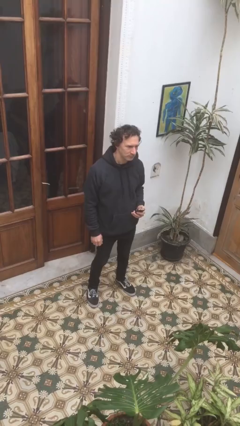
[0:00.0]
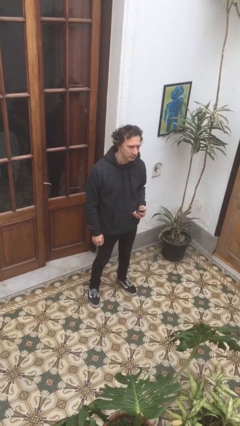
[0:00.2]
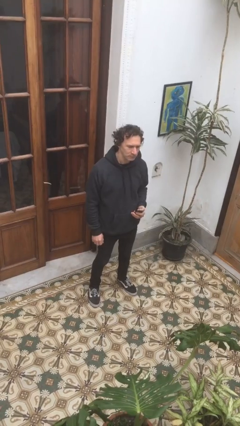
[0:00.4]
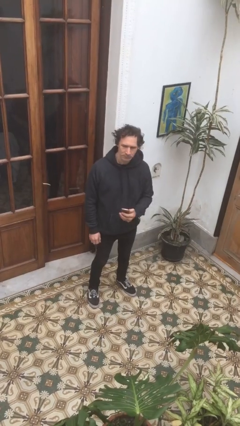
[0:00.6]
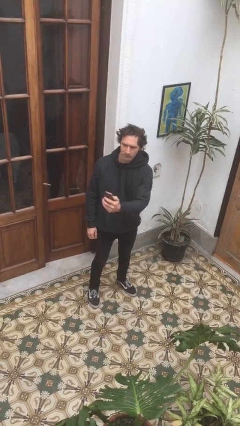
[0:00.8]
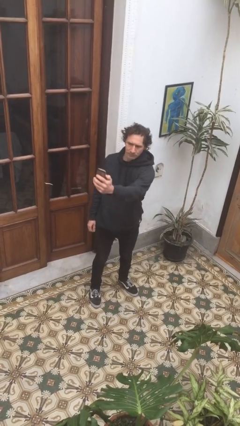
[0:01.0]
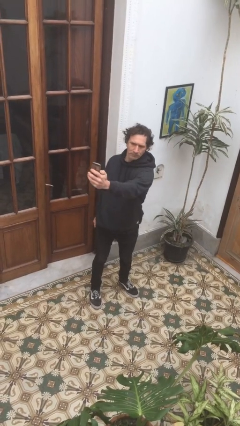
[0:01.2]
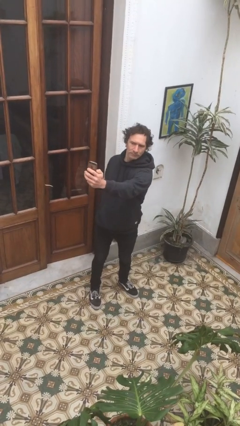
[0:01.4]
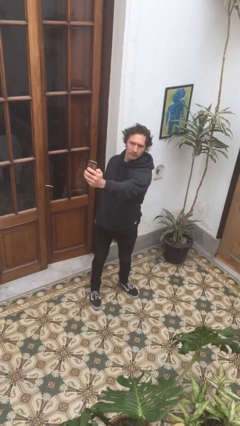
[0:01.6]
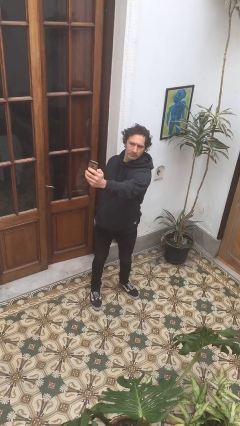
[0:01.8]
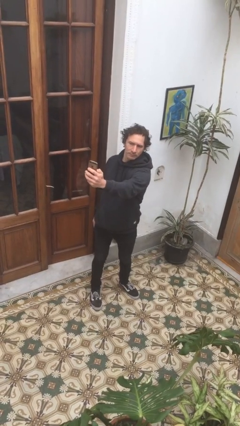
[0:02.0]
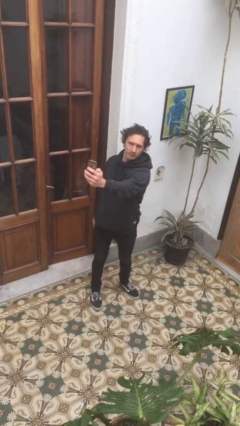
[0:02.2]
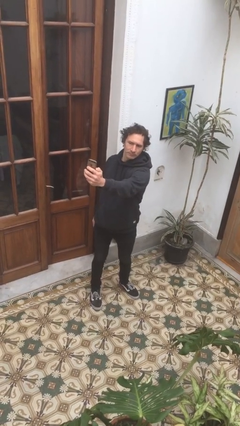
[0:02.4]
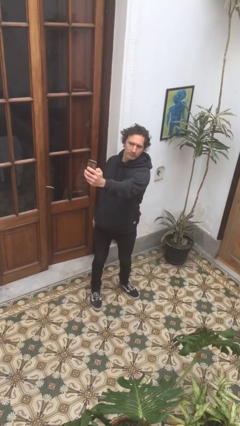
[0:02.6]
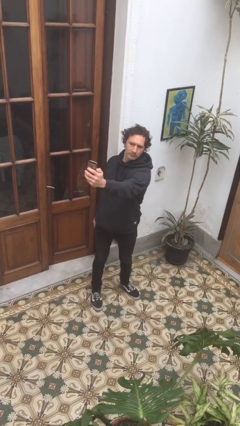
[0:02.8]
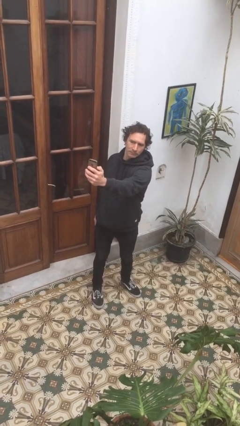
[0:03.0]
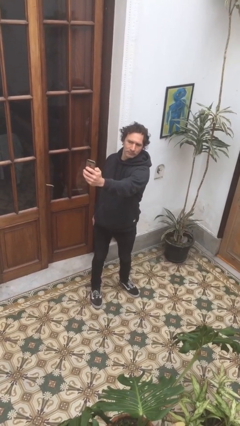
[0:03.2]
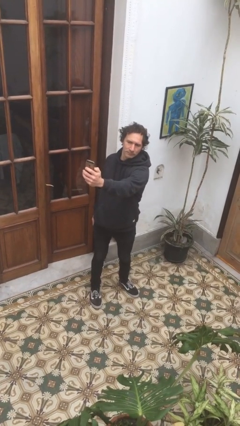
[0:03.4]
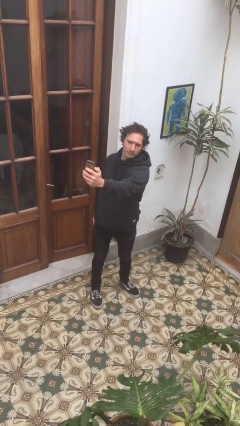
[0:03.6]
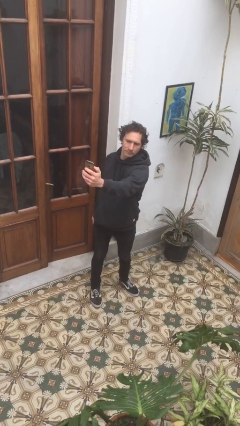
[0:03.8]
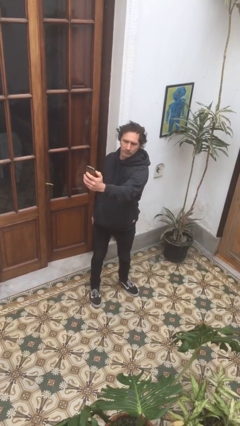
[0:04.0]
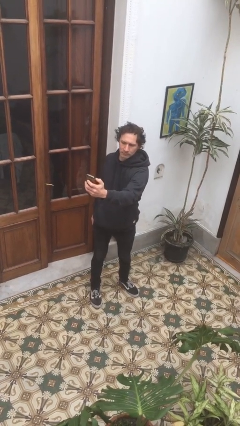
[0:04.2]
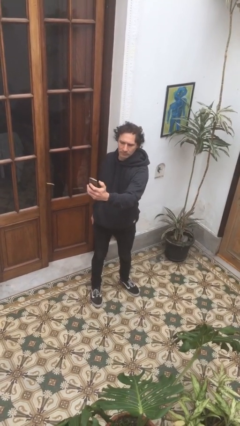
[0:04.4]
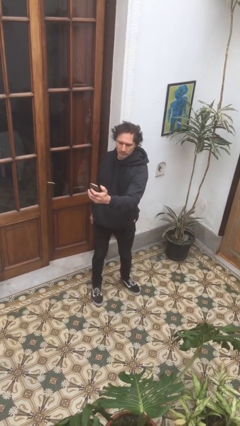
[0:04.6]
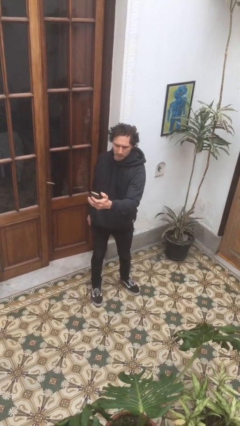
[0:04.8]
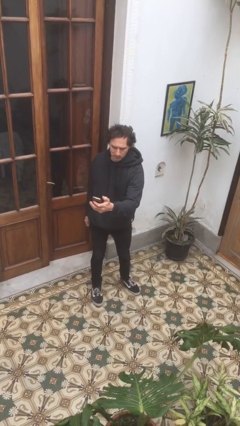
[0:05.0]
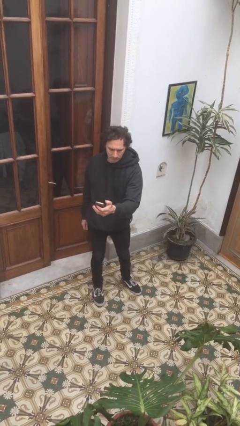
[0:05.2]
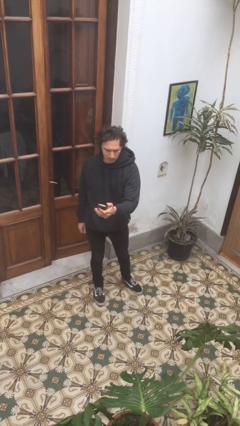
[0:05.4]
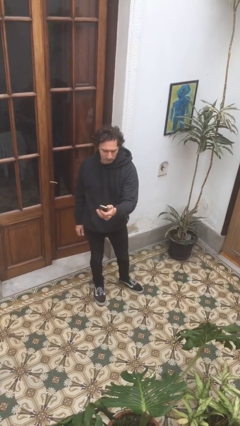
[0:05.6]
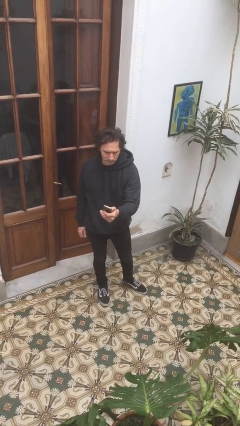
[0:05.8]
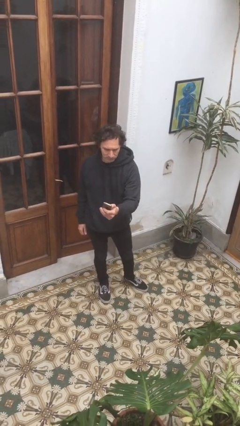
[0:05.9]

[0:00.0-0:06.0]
person takes selfie

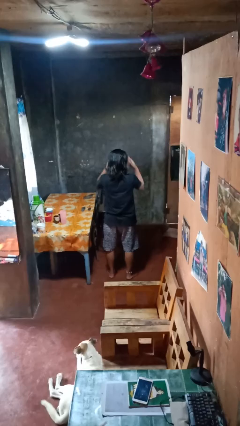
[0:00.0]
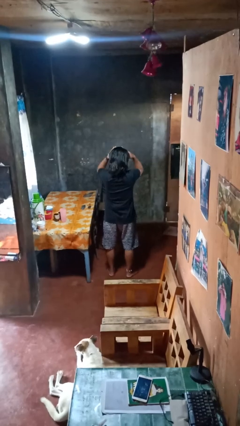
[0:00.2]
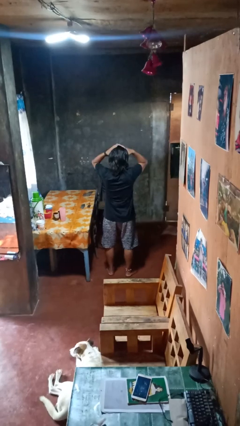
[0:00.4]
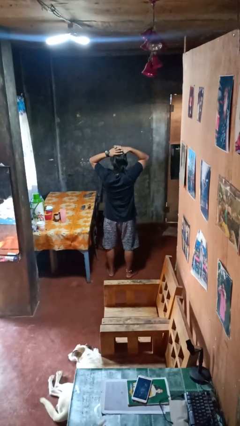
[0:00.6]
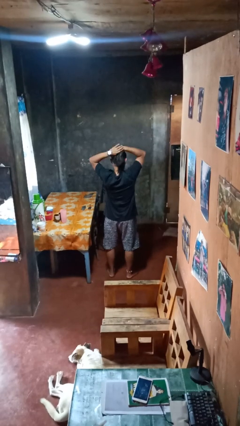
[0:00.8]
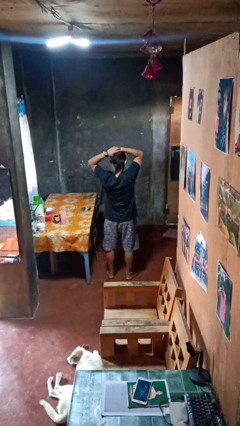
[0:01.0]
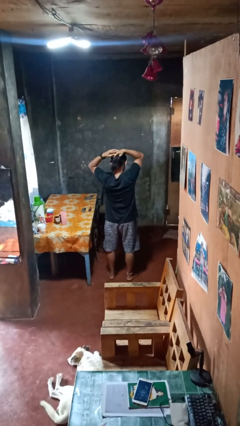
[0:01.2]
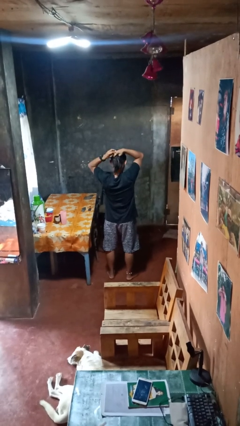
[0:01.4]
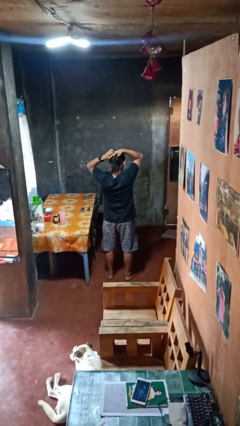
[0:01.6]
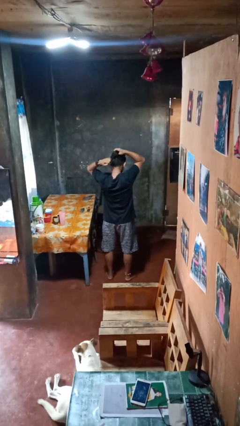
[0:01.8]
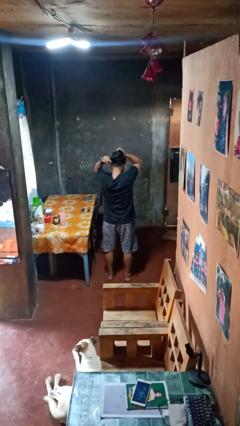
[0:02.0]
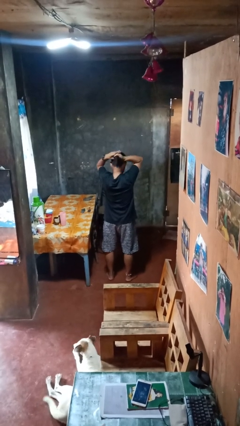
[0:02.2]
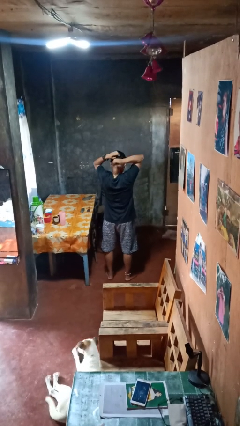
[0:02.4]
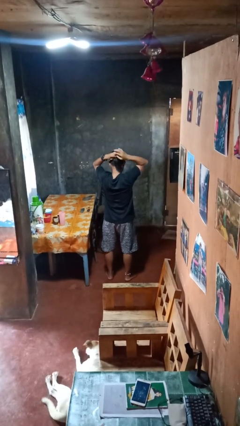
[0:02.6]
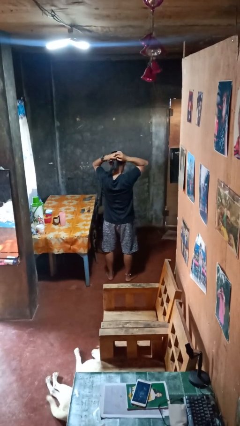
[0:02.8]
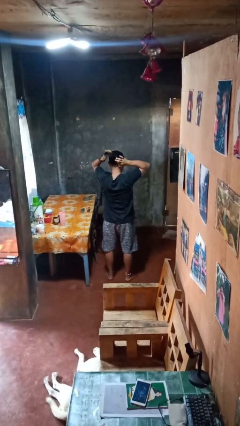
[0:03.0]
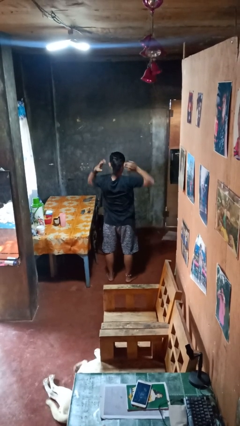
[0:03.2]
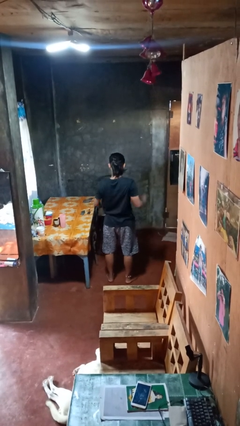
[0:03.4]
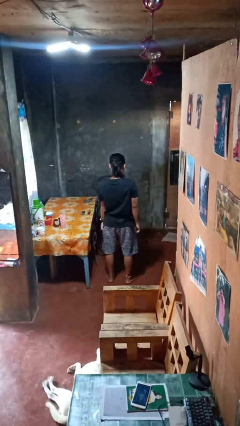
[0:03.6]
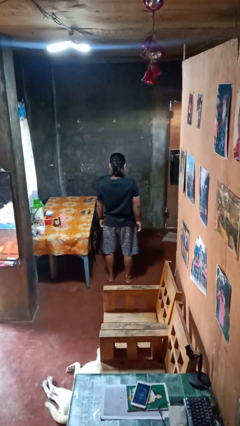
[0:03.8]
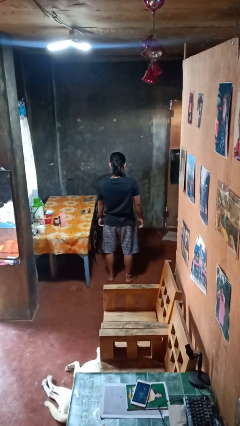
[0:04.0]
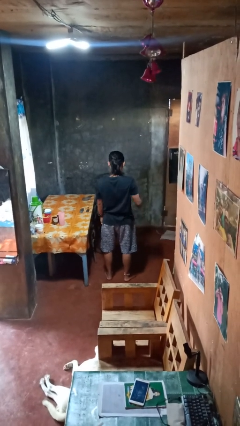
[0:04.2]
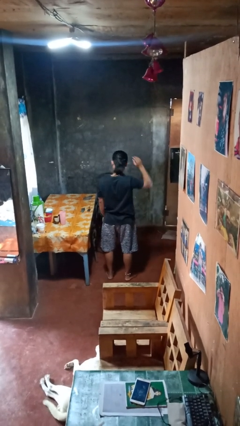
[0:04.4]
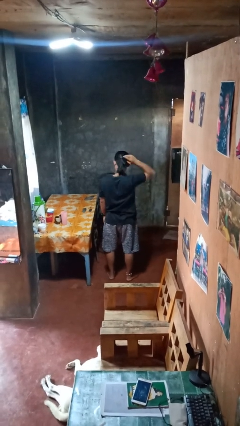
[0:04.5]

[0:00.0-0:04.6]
person puts hair in ponytail

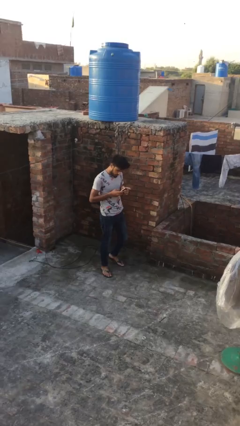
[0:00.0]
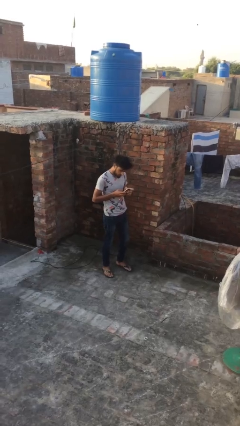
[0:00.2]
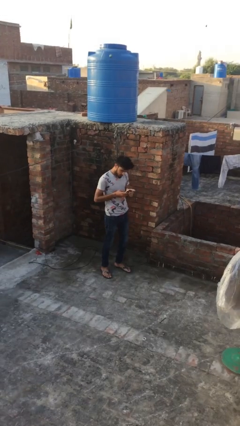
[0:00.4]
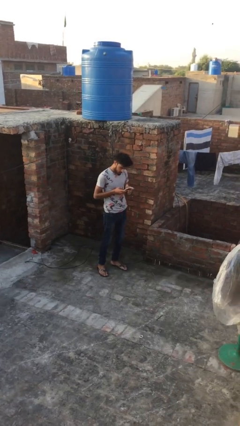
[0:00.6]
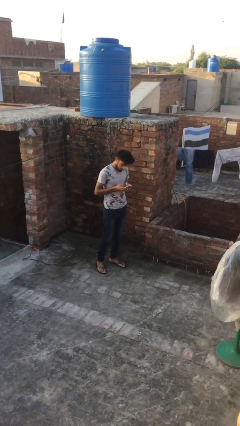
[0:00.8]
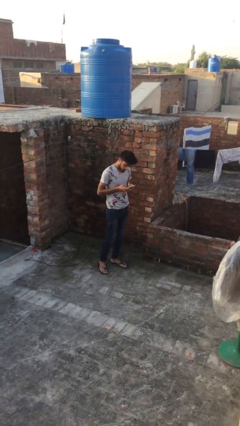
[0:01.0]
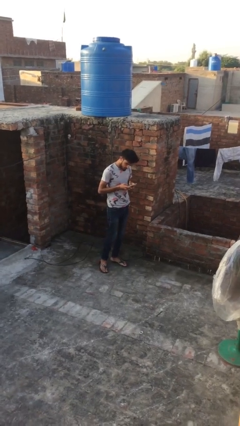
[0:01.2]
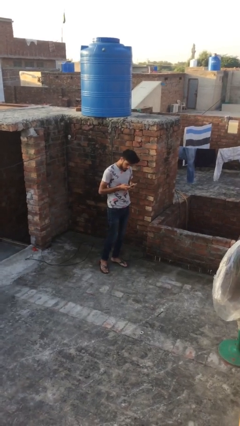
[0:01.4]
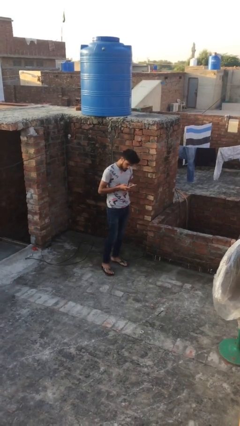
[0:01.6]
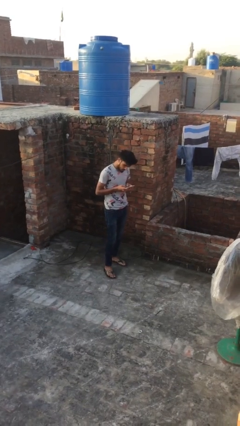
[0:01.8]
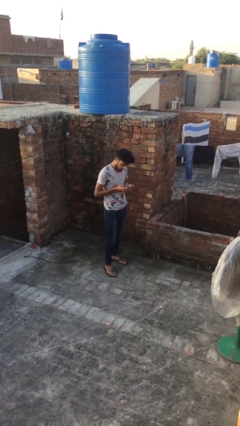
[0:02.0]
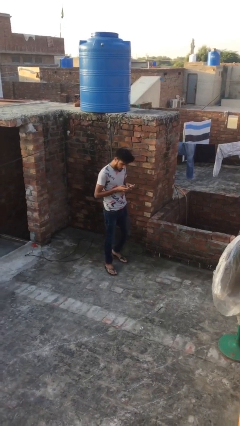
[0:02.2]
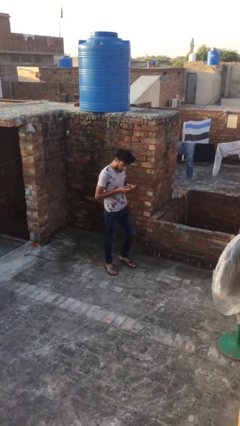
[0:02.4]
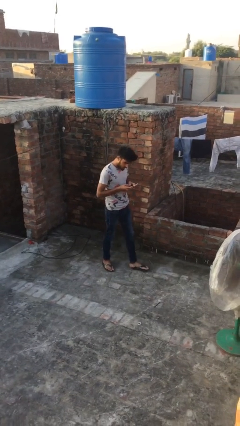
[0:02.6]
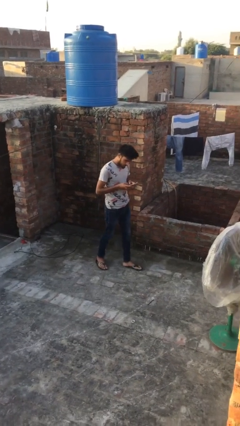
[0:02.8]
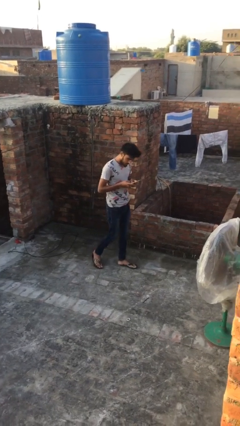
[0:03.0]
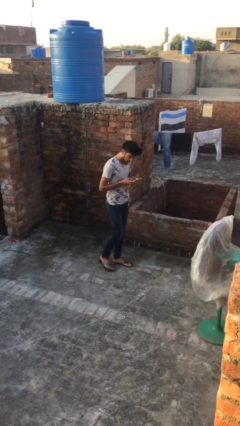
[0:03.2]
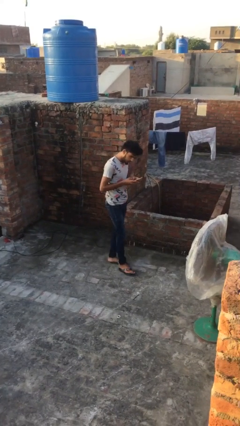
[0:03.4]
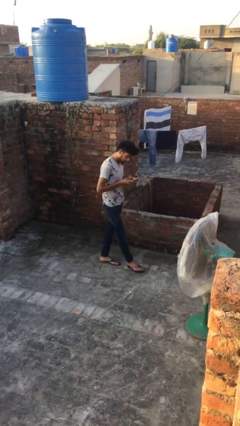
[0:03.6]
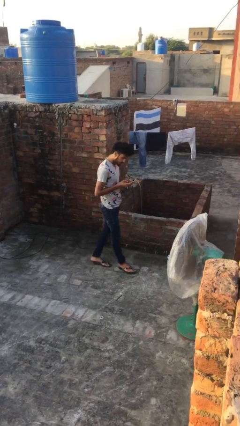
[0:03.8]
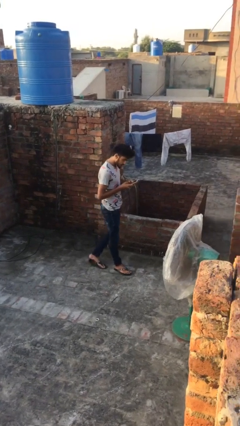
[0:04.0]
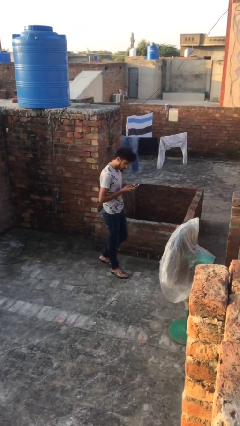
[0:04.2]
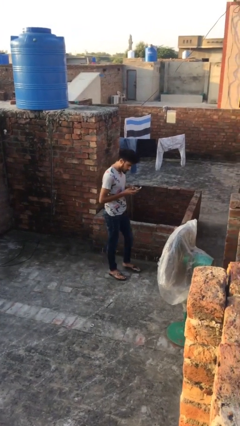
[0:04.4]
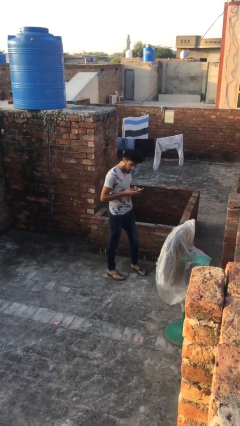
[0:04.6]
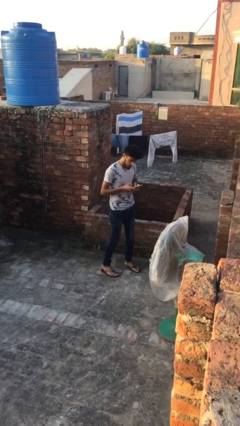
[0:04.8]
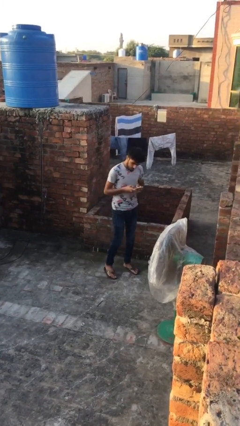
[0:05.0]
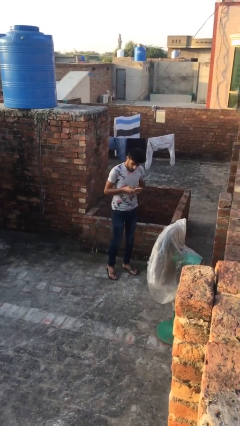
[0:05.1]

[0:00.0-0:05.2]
person texts on phone

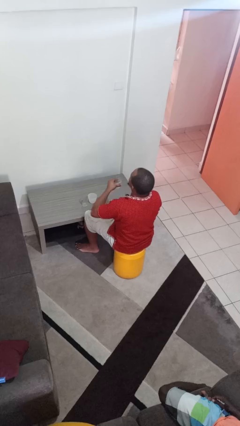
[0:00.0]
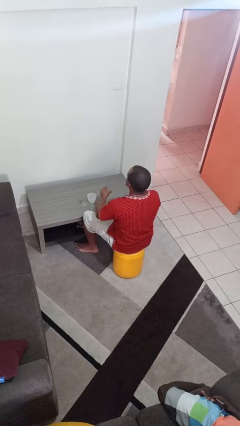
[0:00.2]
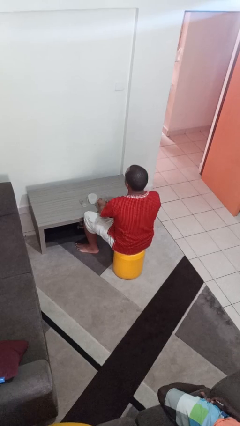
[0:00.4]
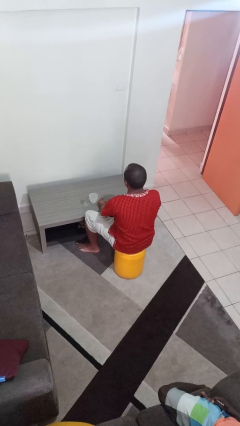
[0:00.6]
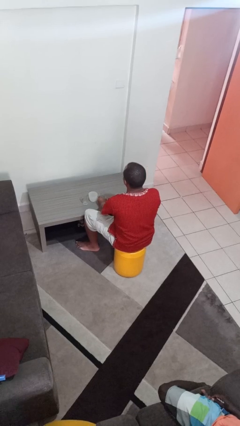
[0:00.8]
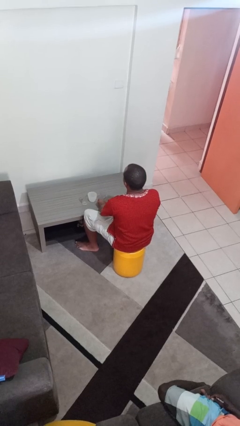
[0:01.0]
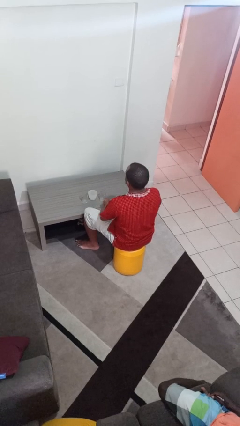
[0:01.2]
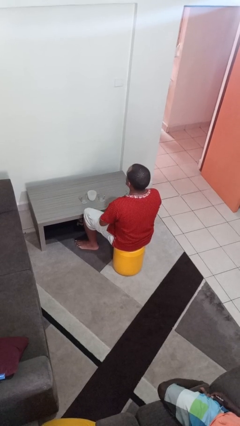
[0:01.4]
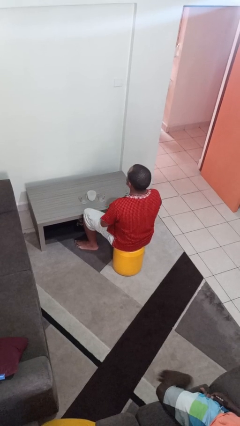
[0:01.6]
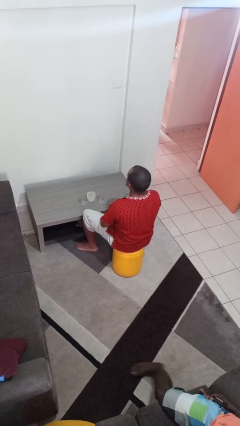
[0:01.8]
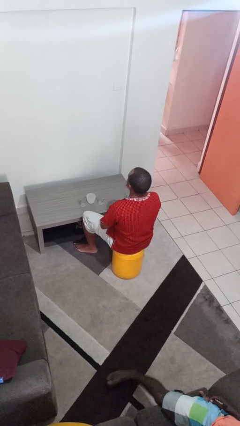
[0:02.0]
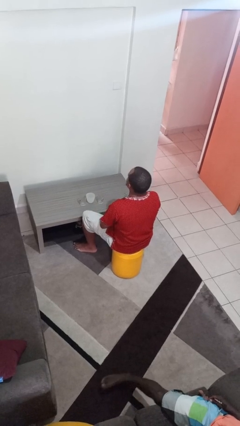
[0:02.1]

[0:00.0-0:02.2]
person puts down object on table
